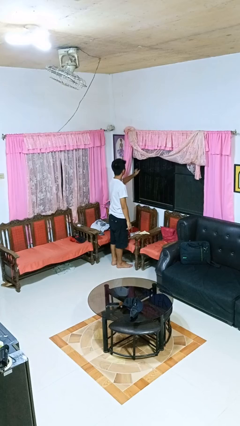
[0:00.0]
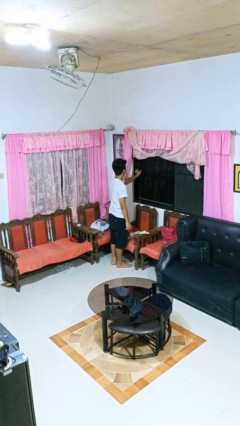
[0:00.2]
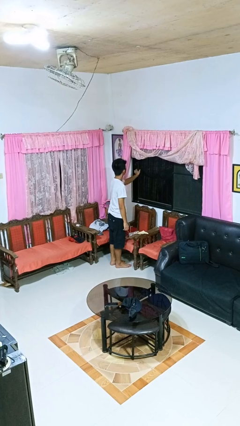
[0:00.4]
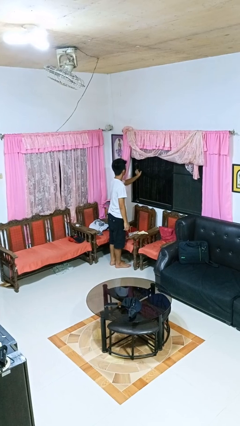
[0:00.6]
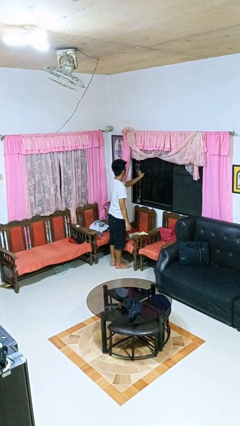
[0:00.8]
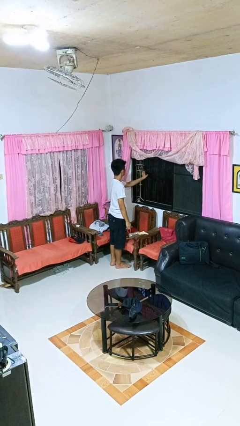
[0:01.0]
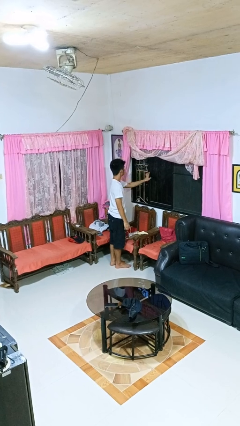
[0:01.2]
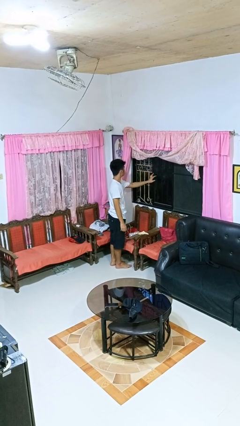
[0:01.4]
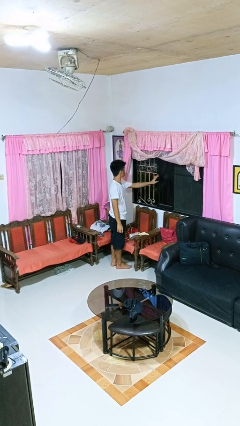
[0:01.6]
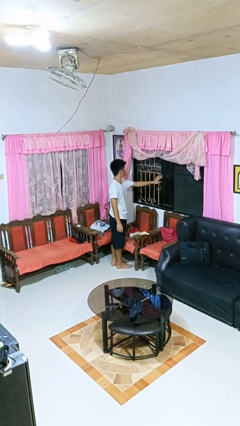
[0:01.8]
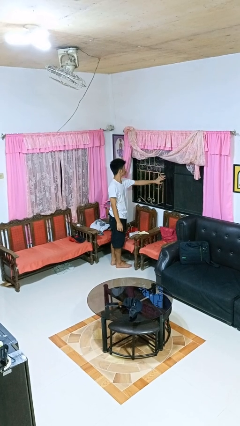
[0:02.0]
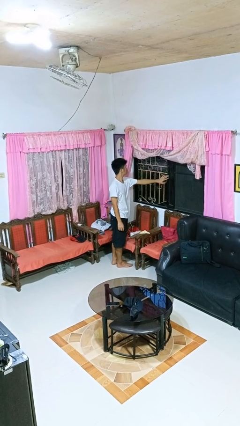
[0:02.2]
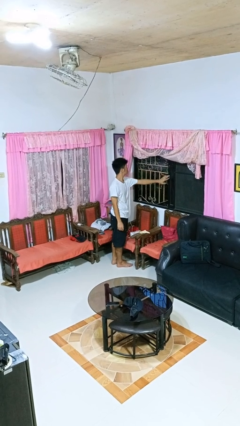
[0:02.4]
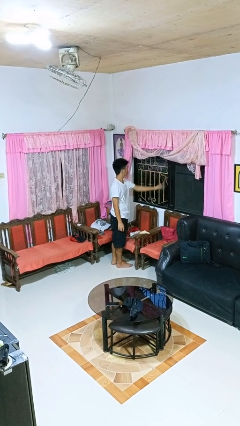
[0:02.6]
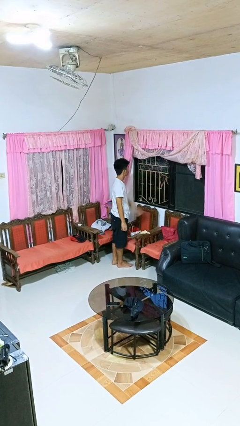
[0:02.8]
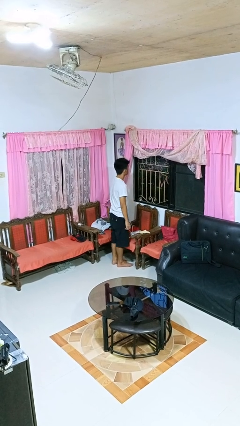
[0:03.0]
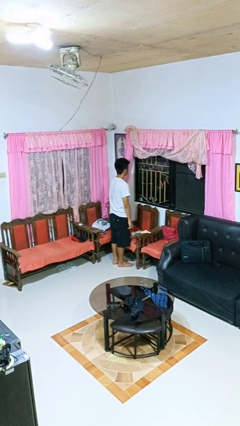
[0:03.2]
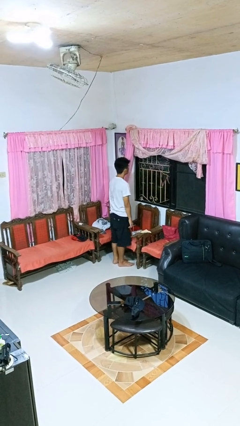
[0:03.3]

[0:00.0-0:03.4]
person opens home window

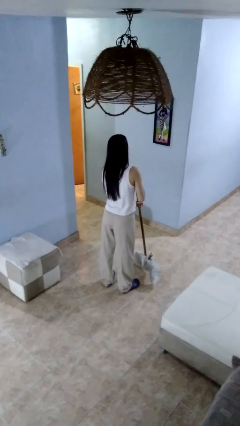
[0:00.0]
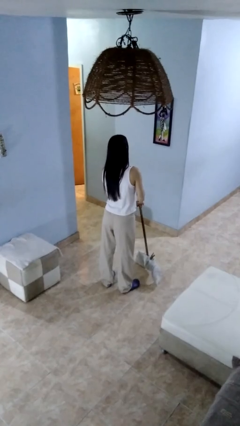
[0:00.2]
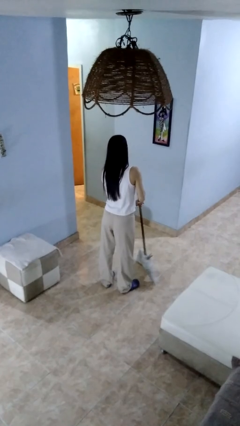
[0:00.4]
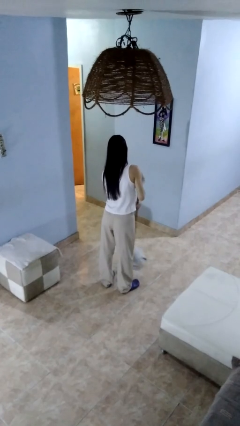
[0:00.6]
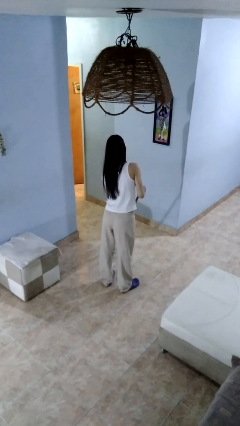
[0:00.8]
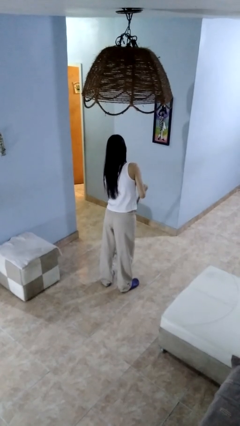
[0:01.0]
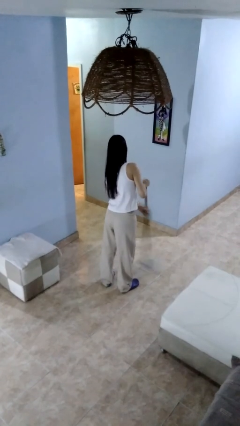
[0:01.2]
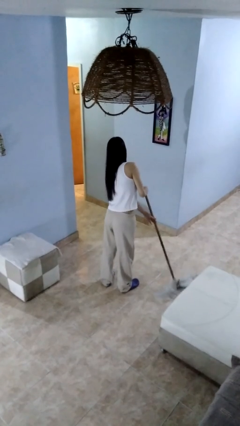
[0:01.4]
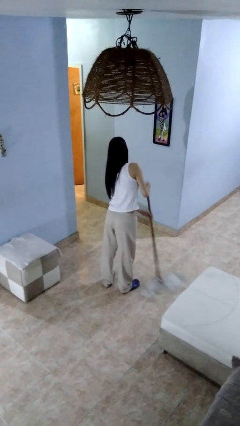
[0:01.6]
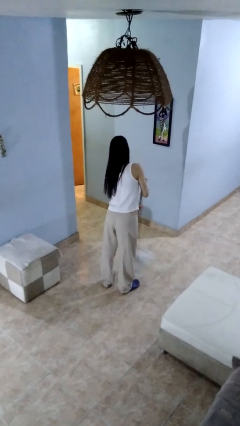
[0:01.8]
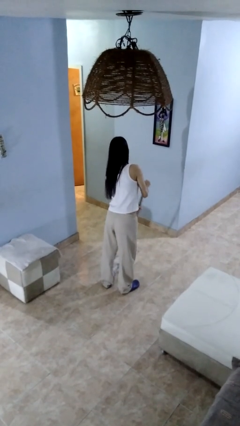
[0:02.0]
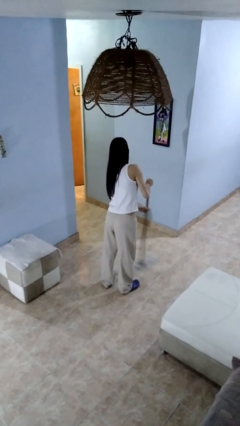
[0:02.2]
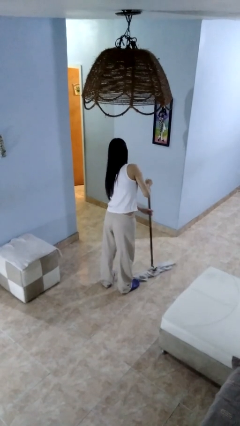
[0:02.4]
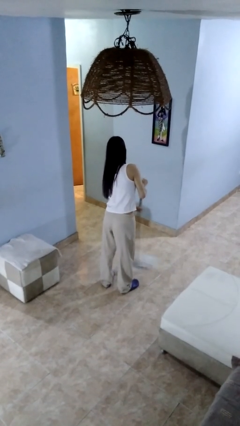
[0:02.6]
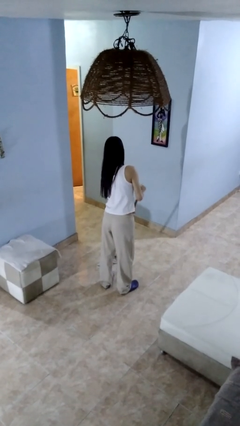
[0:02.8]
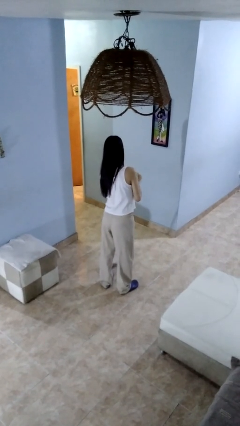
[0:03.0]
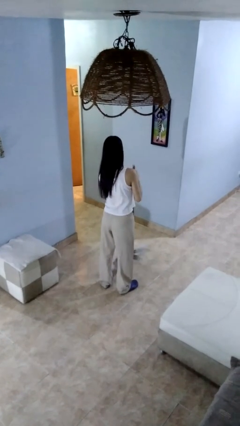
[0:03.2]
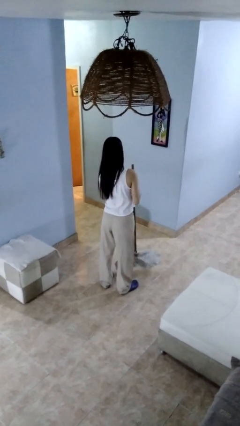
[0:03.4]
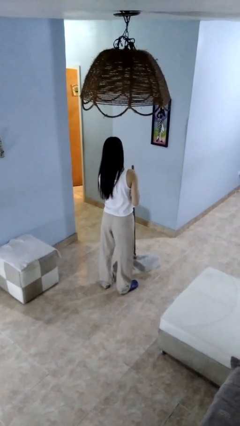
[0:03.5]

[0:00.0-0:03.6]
person mops

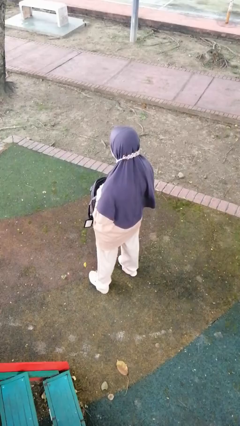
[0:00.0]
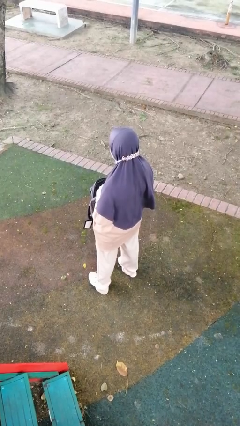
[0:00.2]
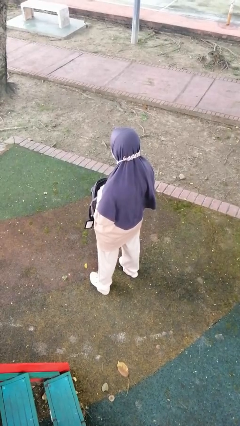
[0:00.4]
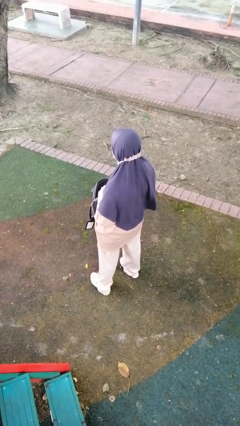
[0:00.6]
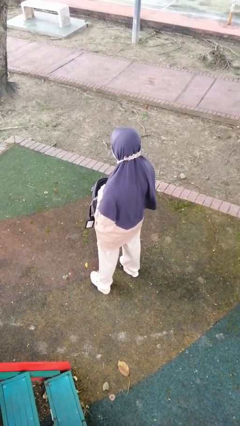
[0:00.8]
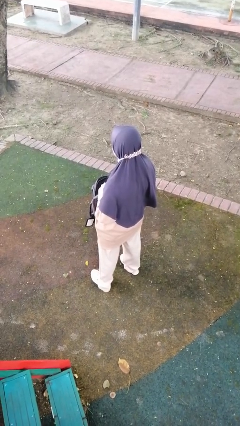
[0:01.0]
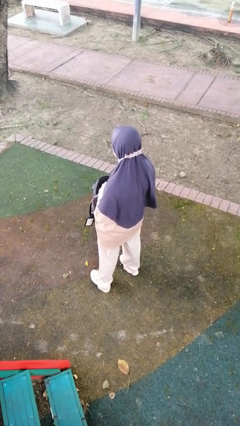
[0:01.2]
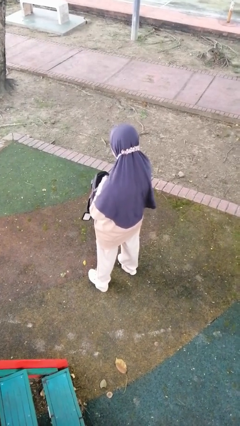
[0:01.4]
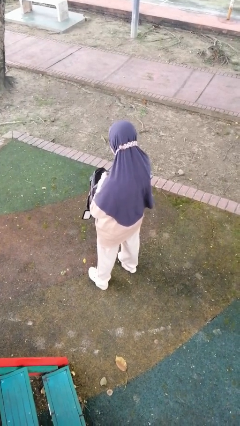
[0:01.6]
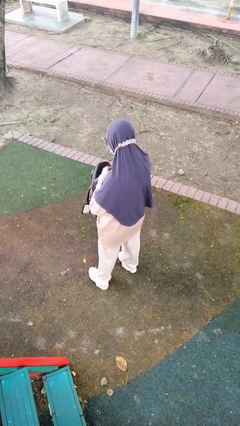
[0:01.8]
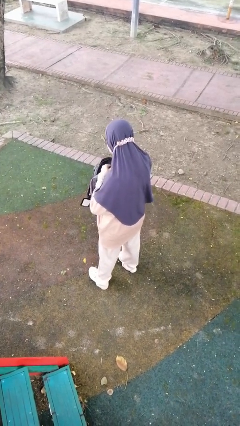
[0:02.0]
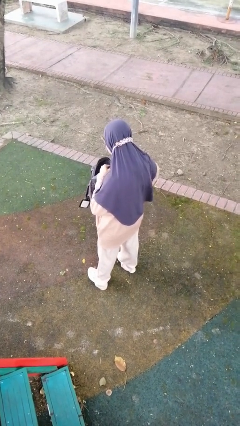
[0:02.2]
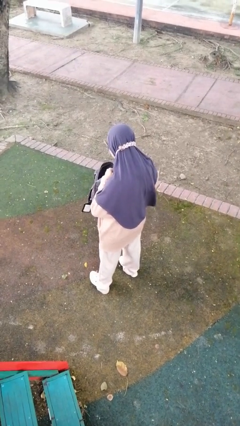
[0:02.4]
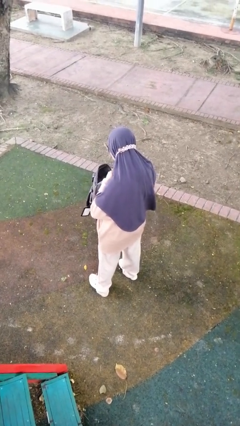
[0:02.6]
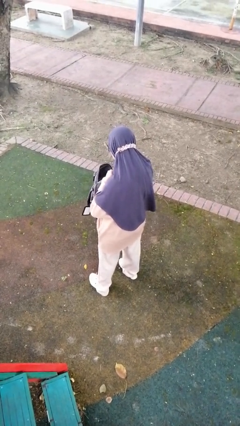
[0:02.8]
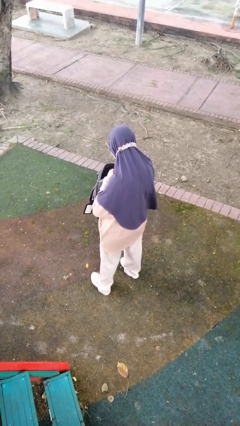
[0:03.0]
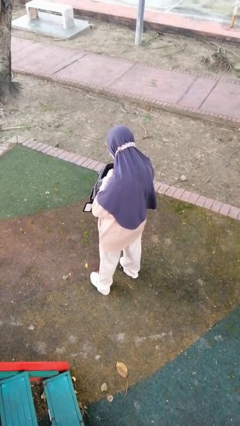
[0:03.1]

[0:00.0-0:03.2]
person searches in backpack

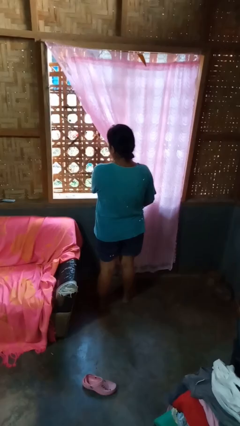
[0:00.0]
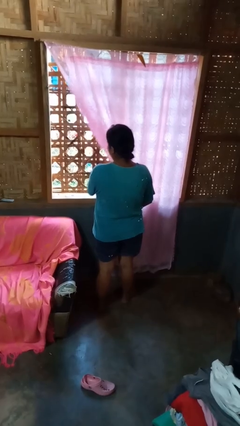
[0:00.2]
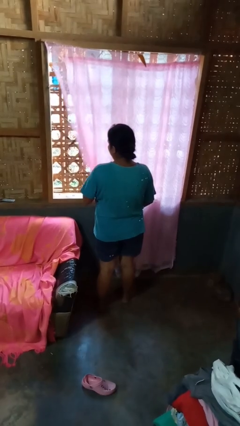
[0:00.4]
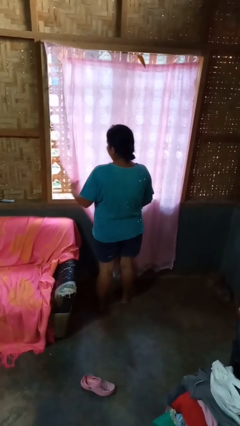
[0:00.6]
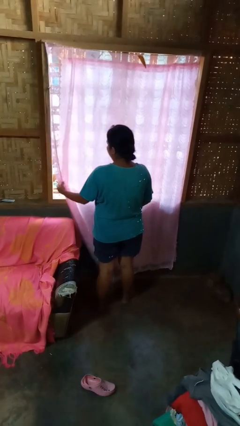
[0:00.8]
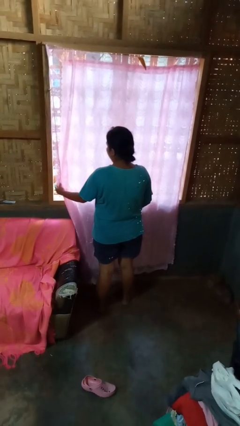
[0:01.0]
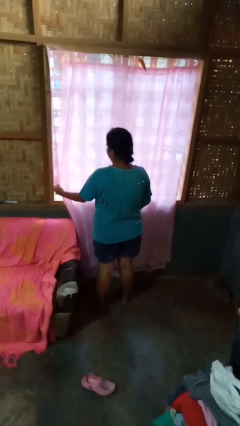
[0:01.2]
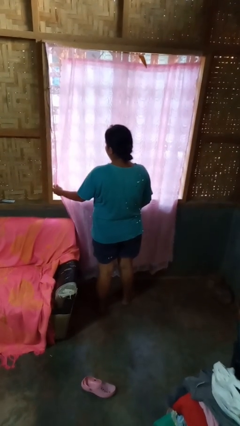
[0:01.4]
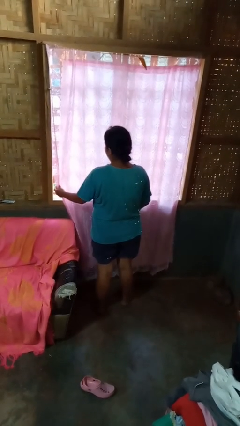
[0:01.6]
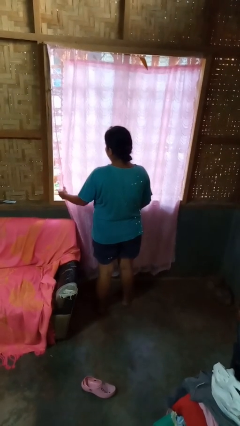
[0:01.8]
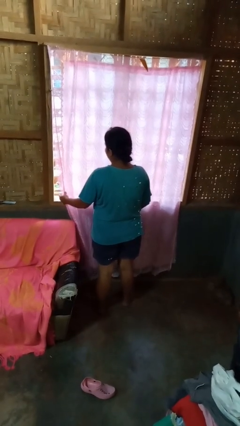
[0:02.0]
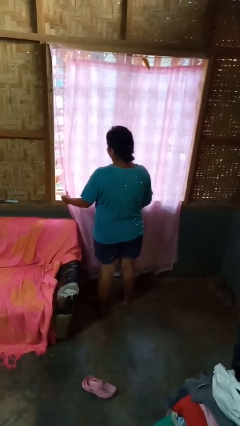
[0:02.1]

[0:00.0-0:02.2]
person closes curtains

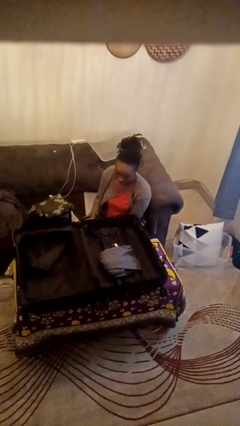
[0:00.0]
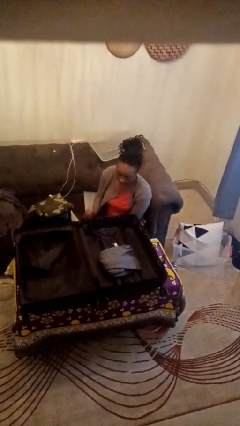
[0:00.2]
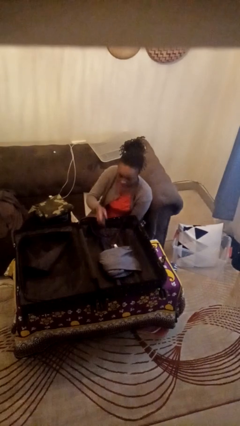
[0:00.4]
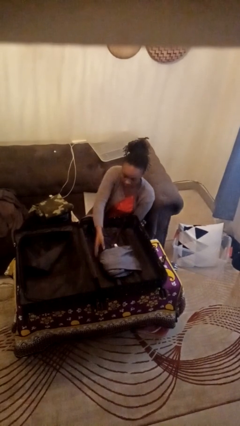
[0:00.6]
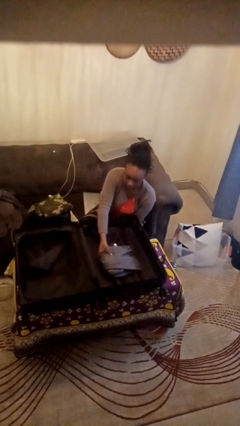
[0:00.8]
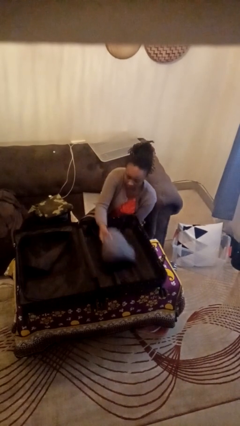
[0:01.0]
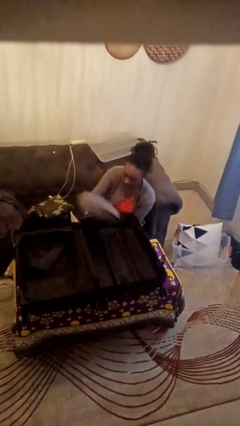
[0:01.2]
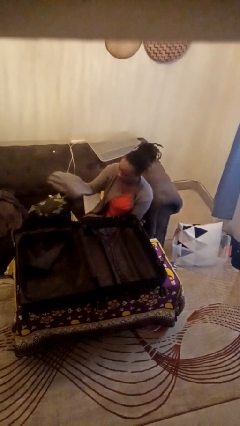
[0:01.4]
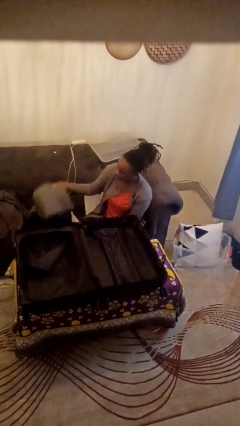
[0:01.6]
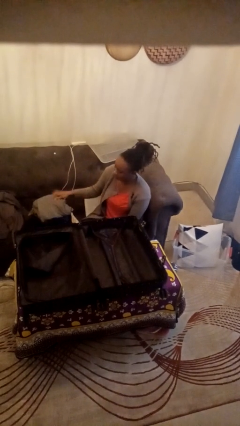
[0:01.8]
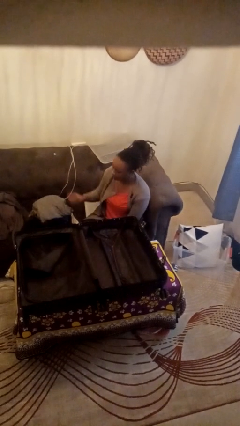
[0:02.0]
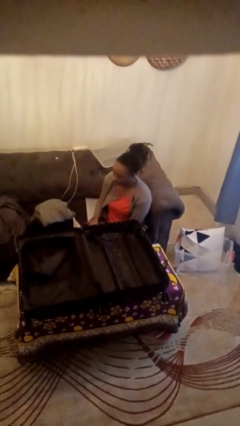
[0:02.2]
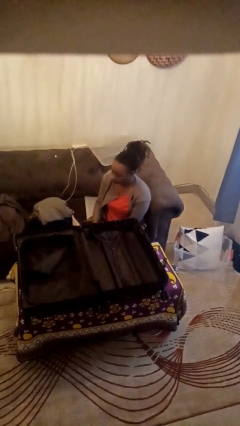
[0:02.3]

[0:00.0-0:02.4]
person unloads clothes from suitcase

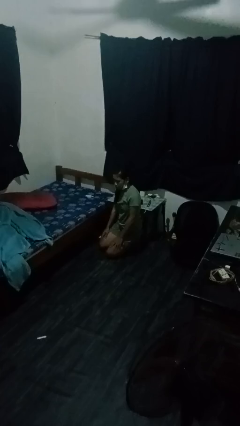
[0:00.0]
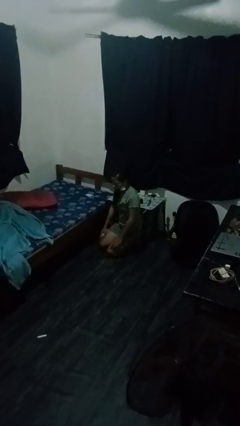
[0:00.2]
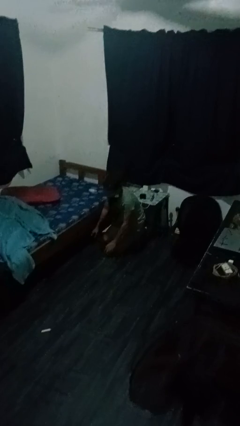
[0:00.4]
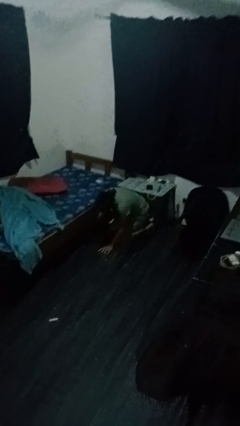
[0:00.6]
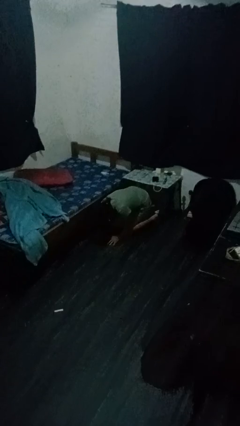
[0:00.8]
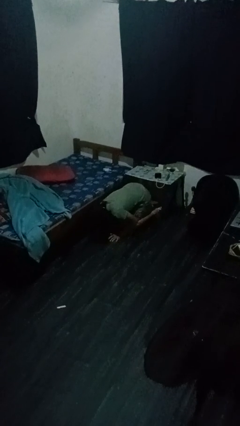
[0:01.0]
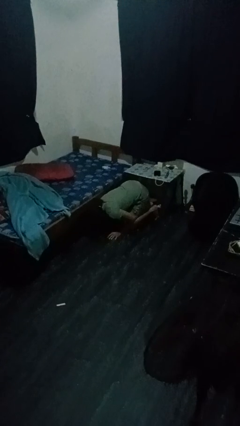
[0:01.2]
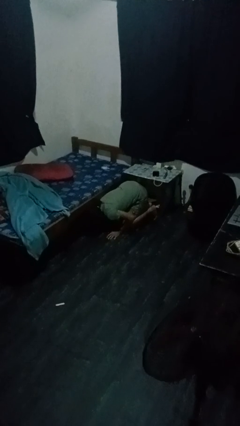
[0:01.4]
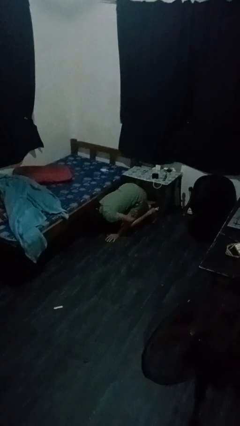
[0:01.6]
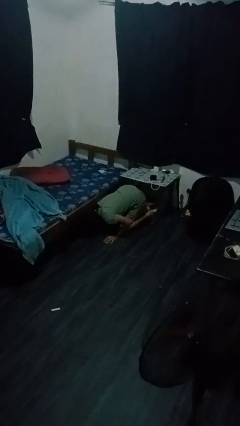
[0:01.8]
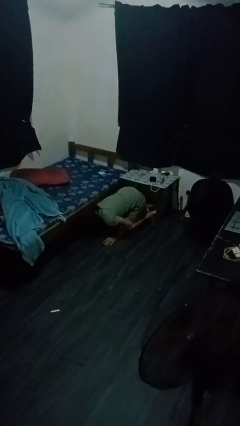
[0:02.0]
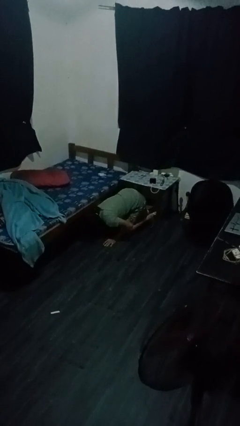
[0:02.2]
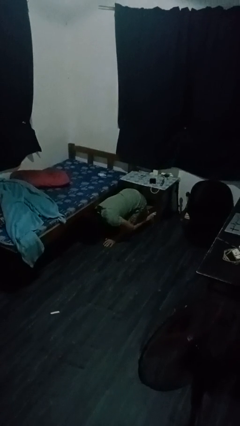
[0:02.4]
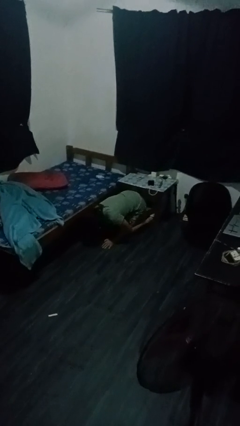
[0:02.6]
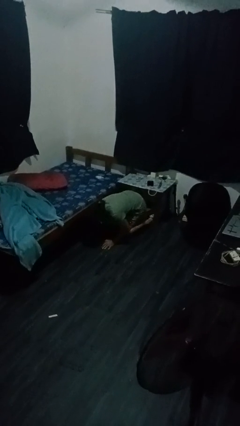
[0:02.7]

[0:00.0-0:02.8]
person searches under bed
